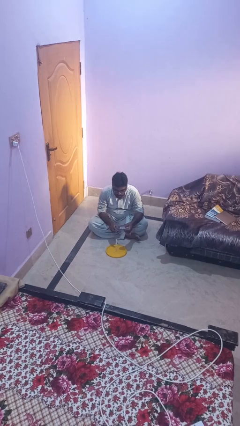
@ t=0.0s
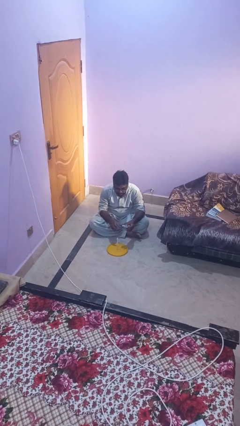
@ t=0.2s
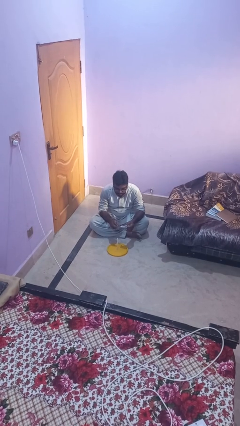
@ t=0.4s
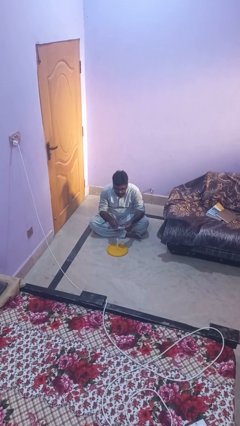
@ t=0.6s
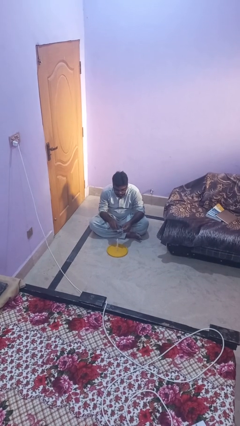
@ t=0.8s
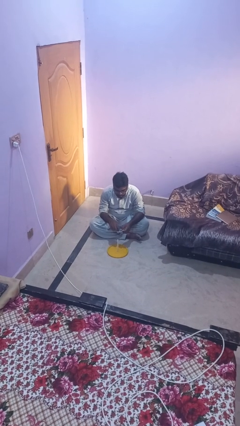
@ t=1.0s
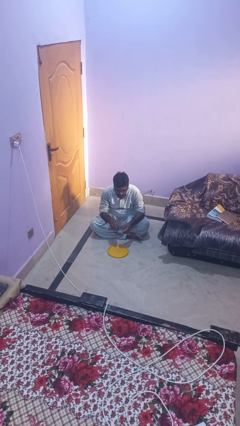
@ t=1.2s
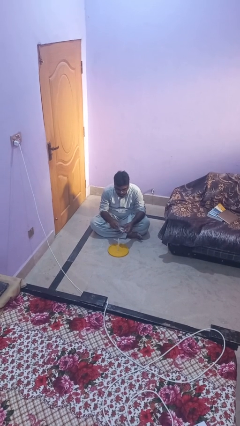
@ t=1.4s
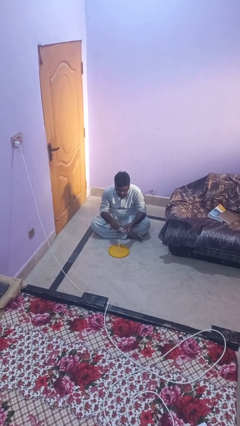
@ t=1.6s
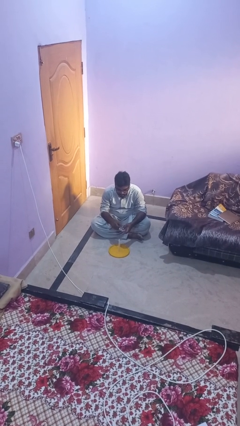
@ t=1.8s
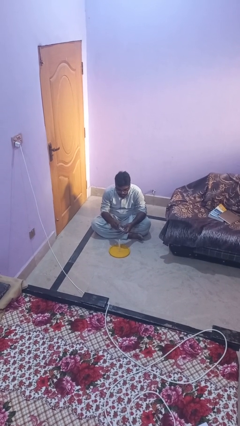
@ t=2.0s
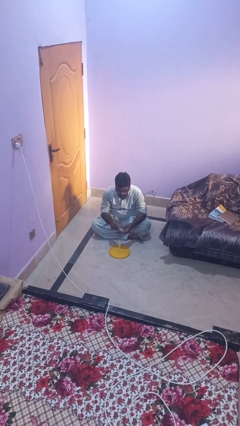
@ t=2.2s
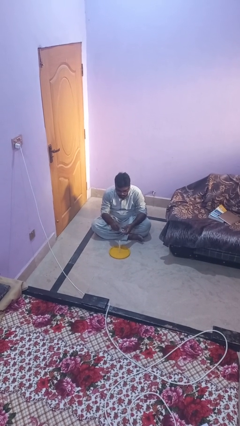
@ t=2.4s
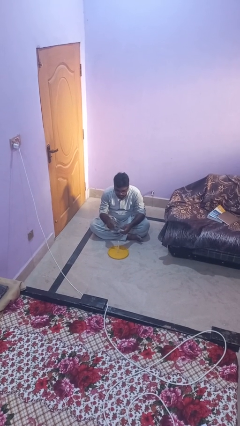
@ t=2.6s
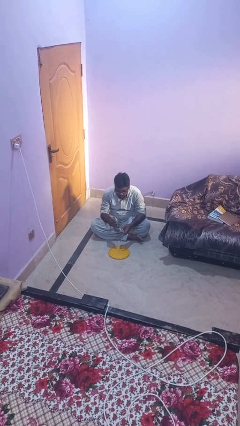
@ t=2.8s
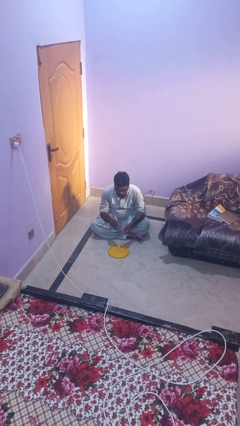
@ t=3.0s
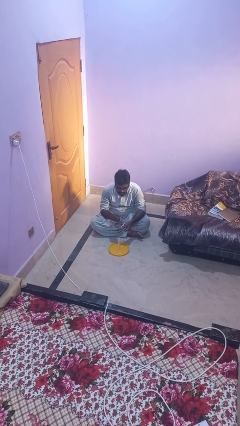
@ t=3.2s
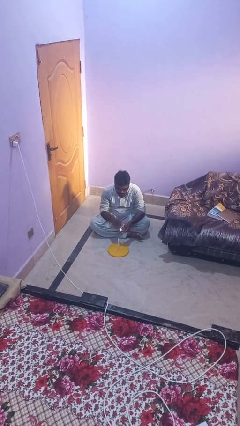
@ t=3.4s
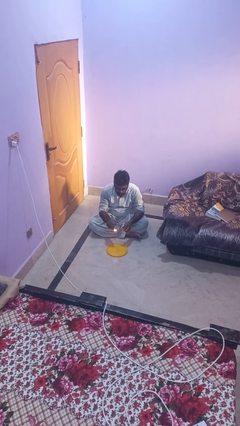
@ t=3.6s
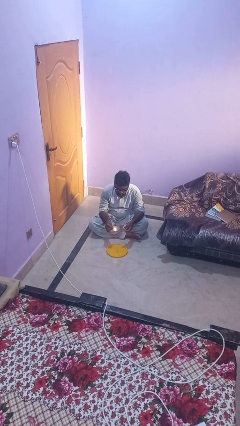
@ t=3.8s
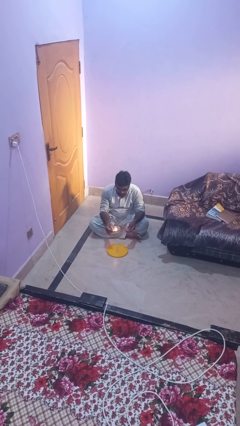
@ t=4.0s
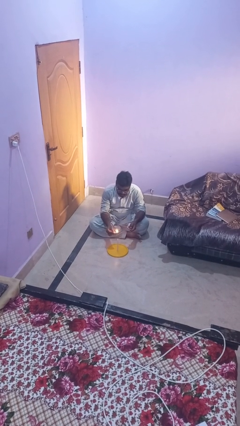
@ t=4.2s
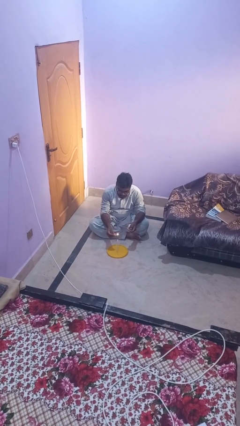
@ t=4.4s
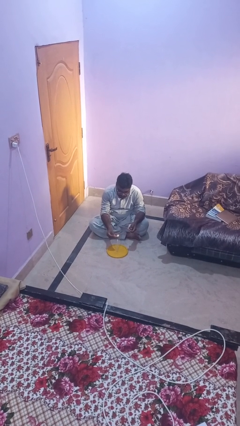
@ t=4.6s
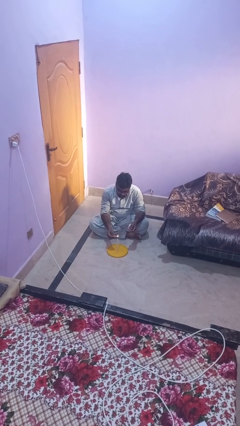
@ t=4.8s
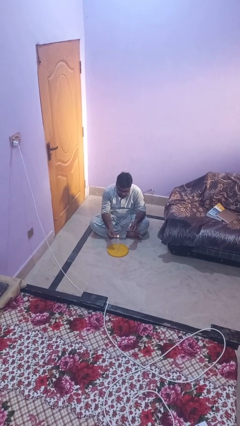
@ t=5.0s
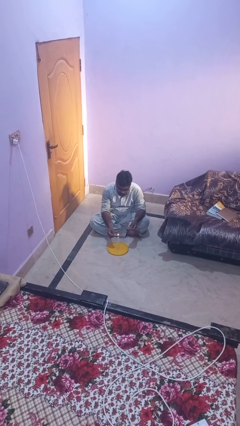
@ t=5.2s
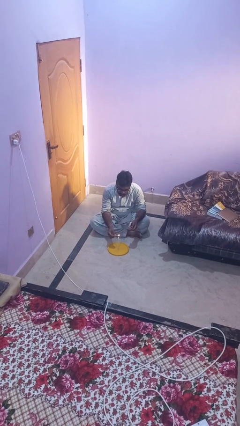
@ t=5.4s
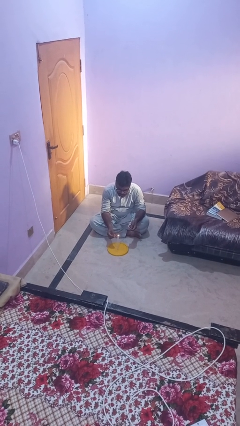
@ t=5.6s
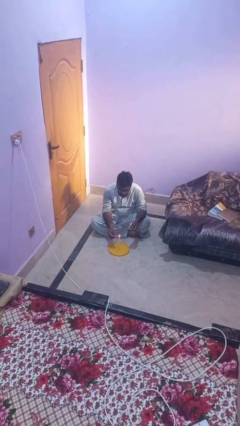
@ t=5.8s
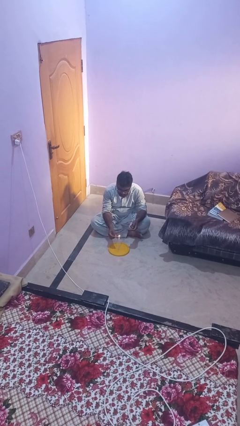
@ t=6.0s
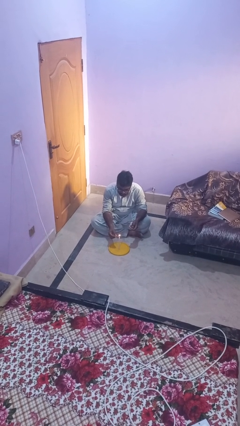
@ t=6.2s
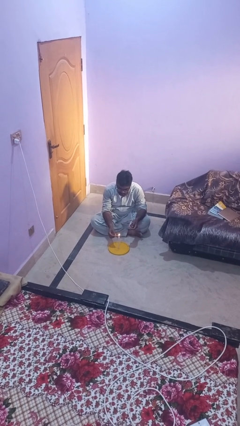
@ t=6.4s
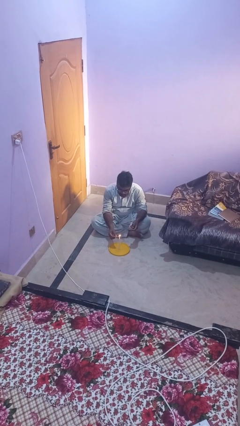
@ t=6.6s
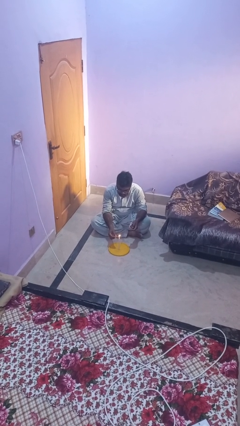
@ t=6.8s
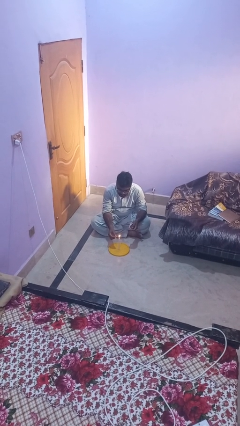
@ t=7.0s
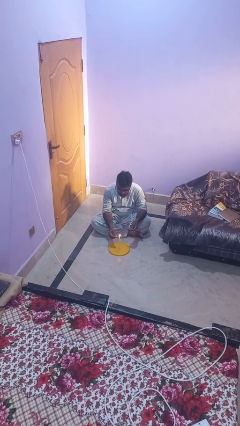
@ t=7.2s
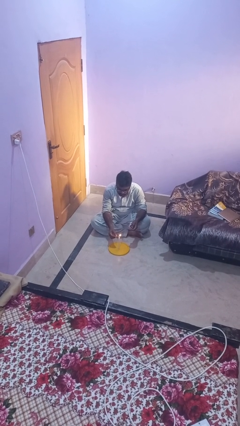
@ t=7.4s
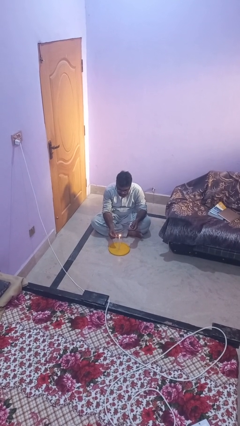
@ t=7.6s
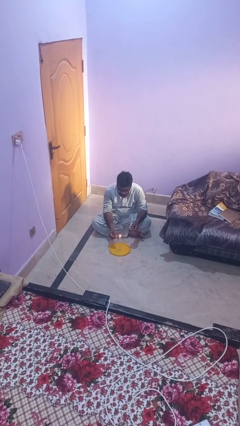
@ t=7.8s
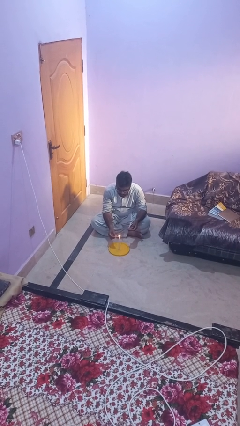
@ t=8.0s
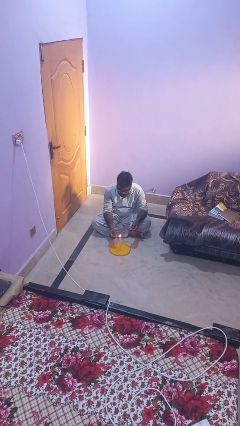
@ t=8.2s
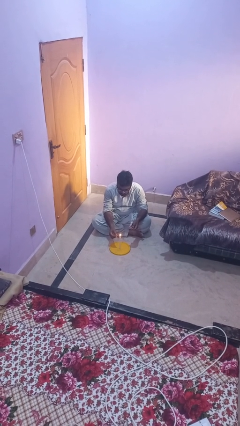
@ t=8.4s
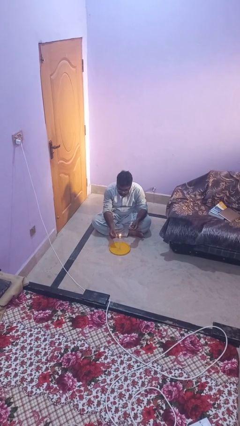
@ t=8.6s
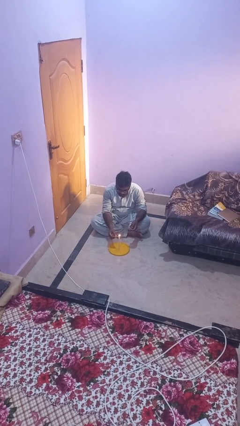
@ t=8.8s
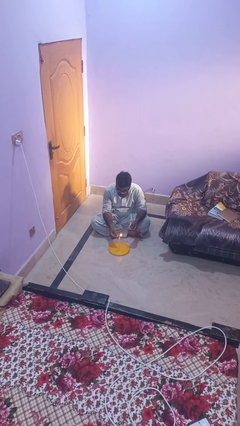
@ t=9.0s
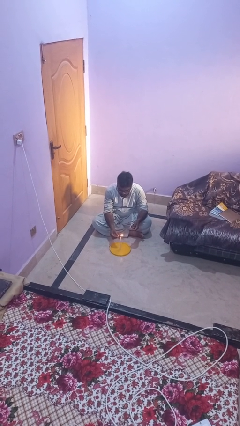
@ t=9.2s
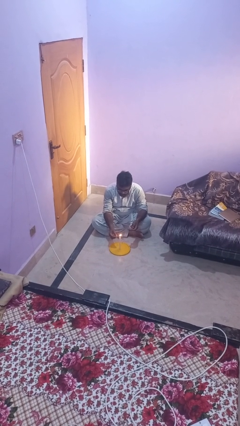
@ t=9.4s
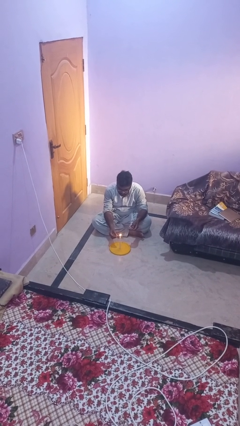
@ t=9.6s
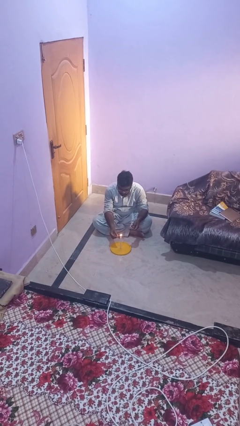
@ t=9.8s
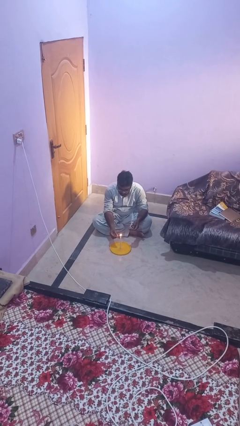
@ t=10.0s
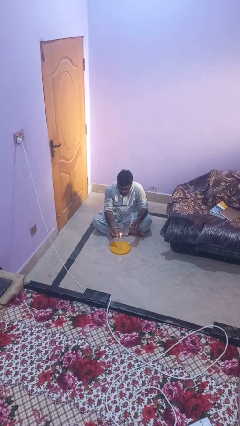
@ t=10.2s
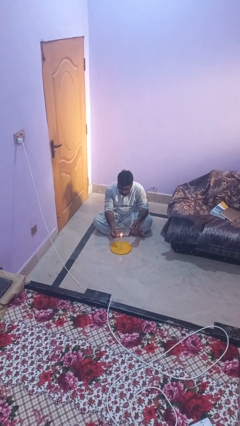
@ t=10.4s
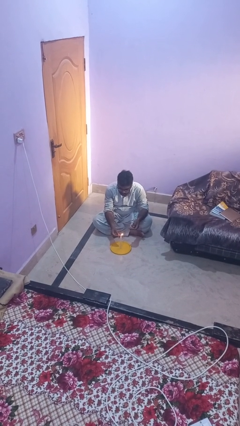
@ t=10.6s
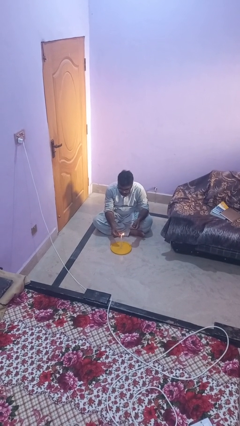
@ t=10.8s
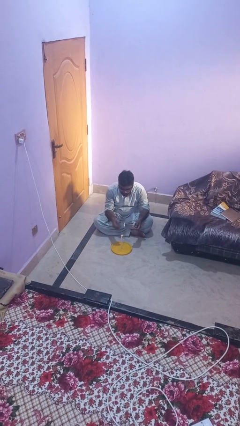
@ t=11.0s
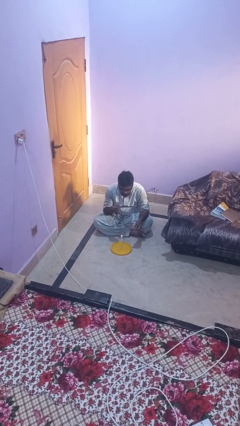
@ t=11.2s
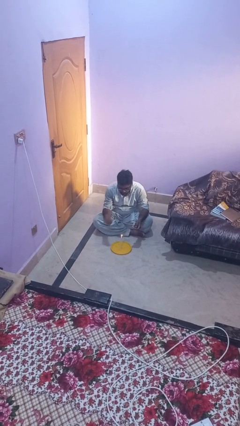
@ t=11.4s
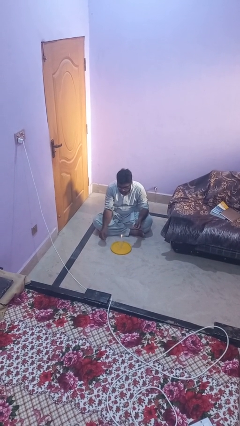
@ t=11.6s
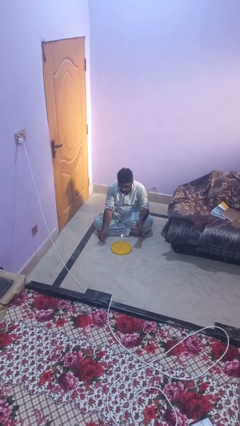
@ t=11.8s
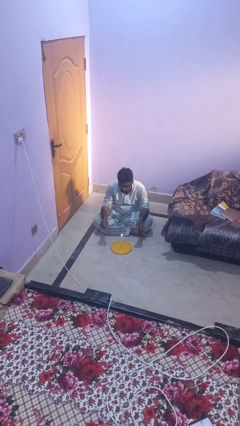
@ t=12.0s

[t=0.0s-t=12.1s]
person lights candle

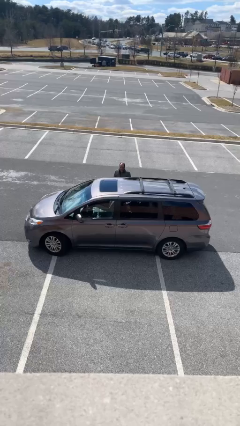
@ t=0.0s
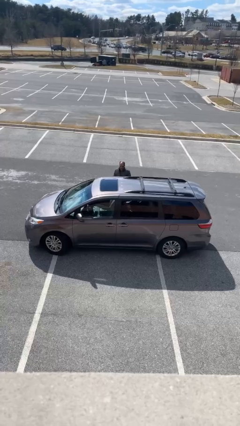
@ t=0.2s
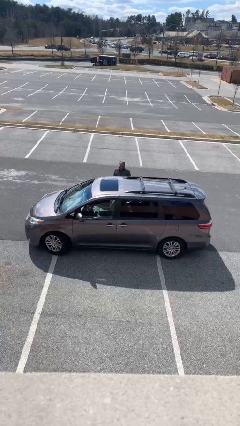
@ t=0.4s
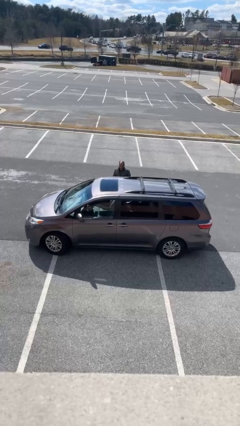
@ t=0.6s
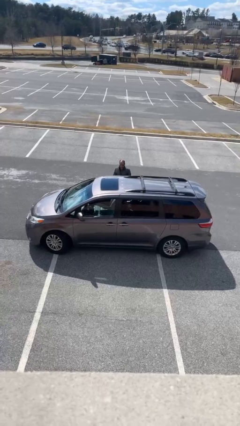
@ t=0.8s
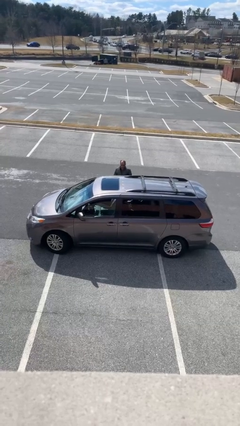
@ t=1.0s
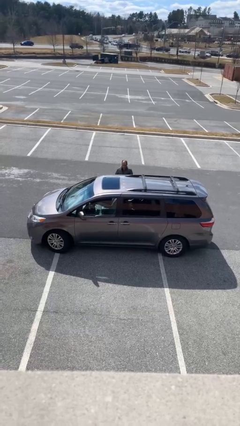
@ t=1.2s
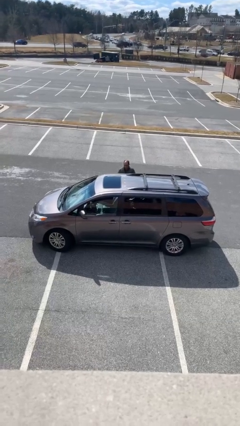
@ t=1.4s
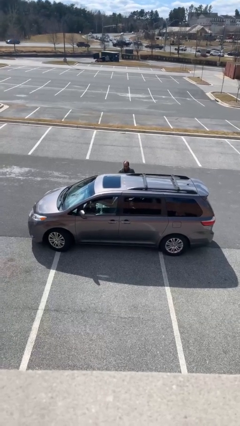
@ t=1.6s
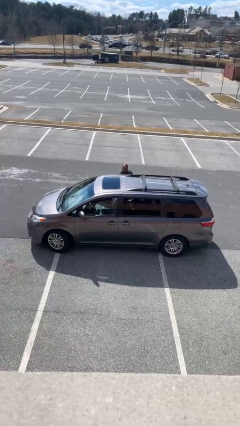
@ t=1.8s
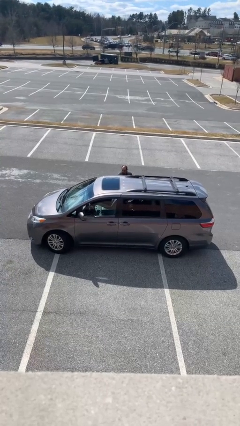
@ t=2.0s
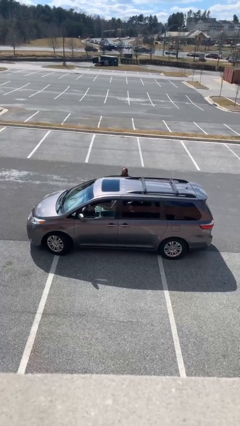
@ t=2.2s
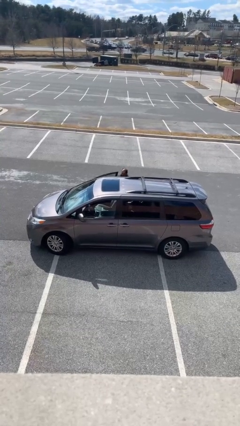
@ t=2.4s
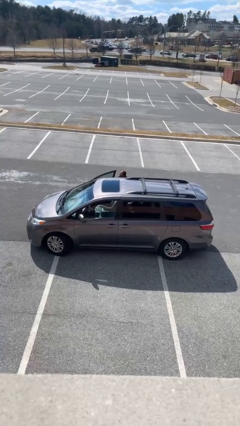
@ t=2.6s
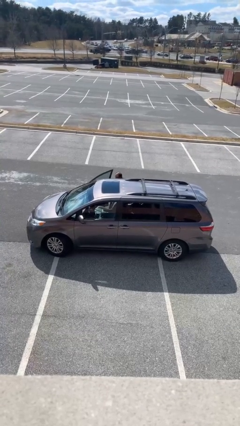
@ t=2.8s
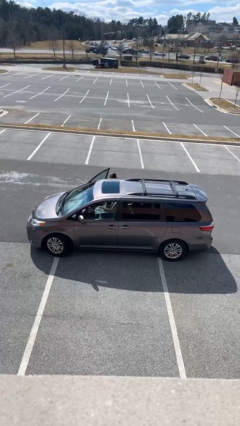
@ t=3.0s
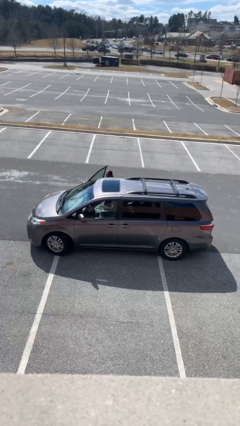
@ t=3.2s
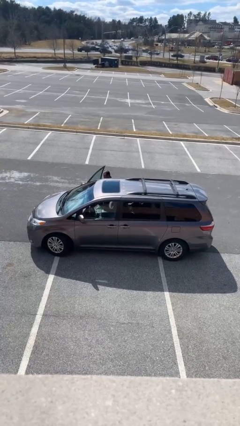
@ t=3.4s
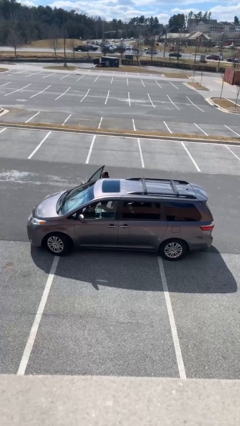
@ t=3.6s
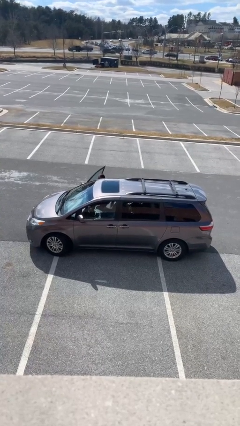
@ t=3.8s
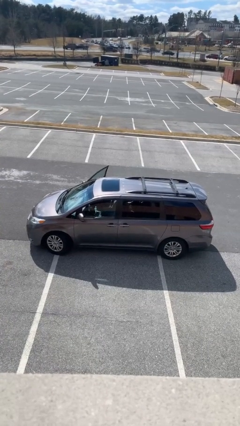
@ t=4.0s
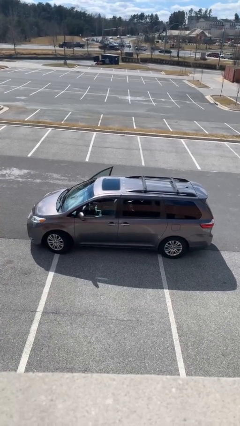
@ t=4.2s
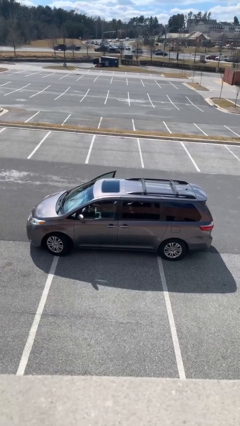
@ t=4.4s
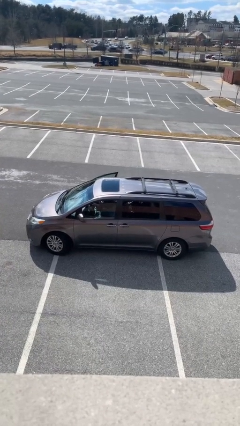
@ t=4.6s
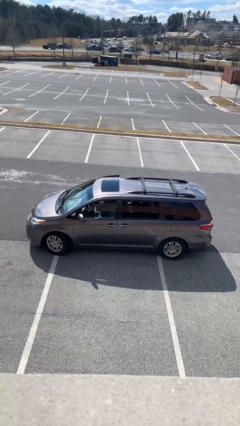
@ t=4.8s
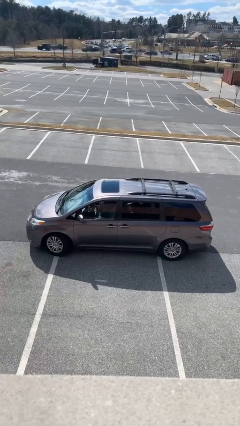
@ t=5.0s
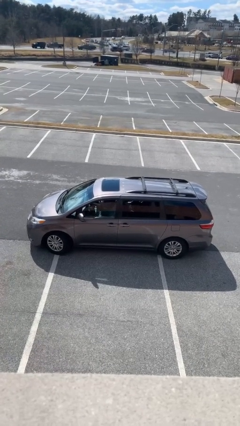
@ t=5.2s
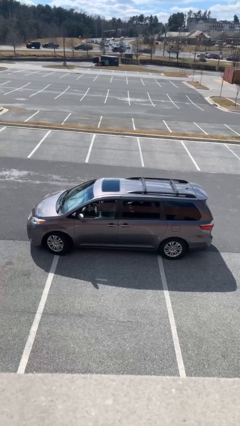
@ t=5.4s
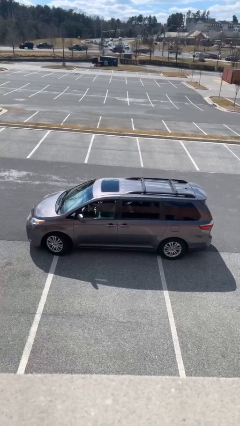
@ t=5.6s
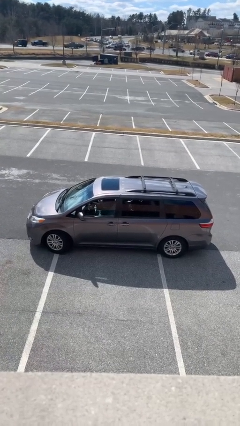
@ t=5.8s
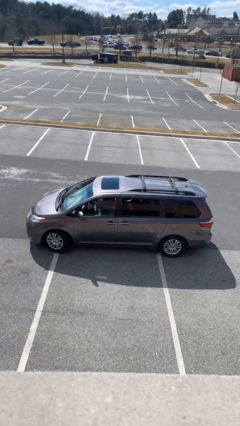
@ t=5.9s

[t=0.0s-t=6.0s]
car picks up person
